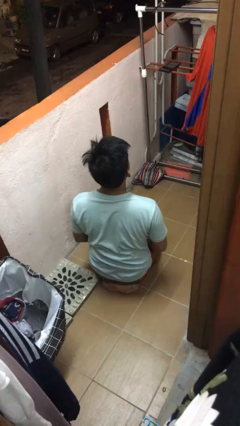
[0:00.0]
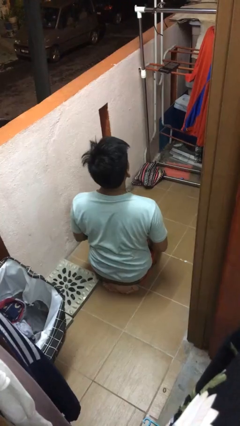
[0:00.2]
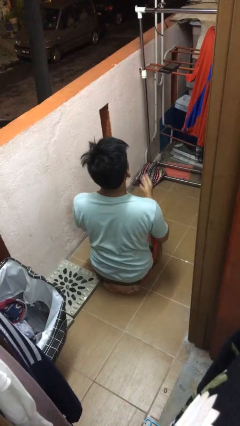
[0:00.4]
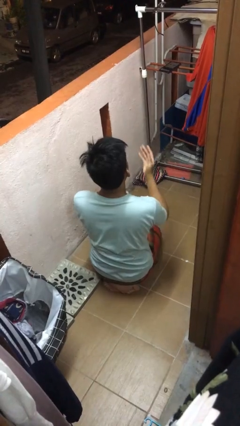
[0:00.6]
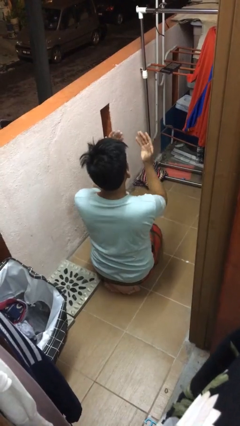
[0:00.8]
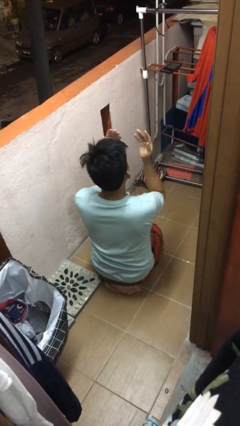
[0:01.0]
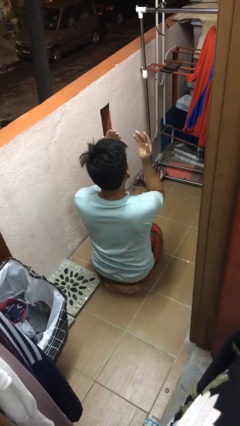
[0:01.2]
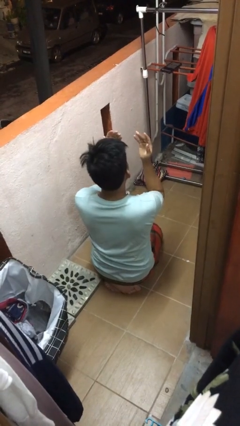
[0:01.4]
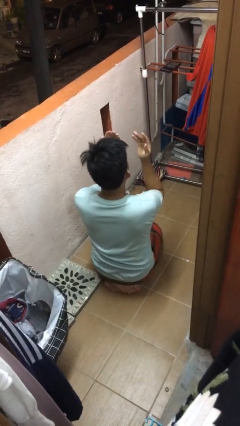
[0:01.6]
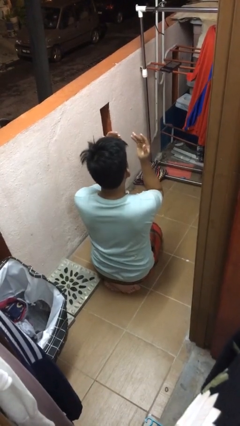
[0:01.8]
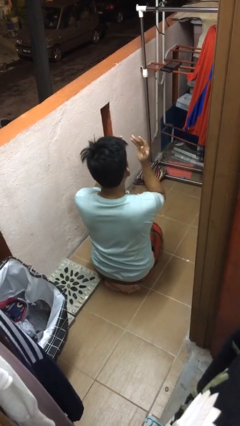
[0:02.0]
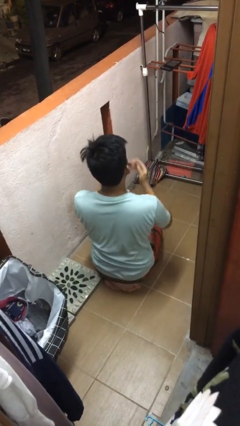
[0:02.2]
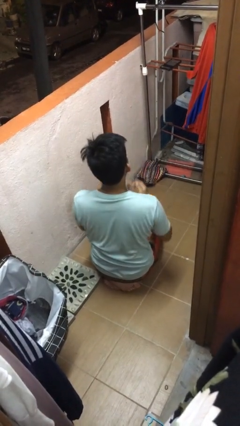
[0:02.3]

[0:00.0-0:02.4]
person prays

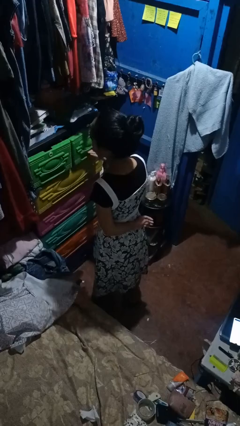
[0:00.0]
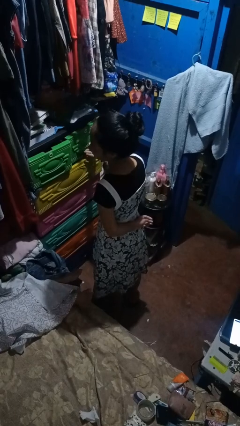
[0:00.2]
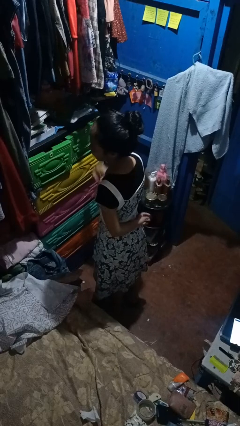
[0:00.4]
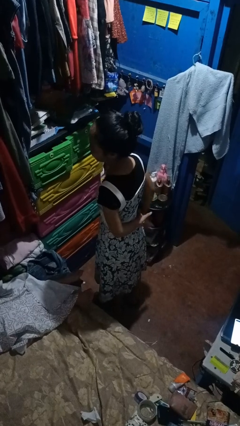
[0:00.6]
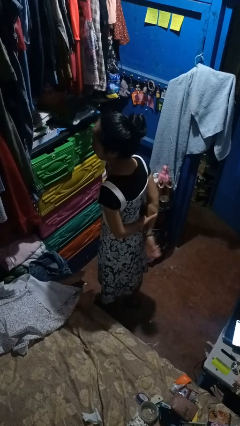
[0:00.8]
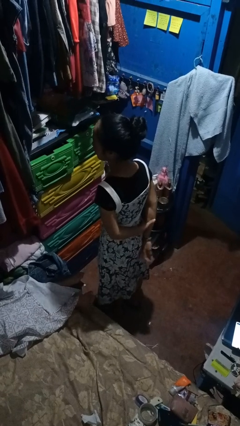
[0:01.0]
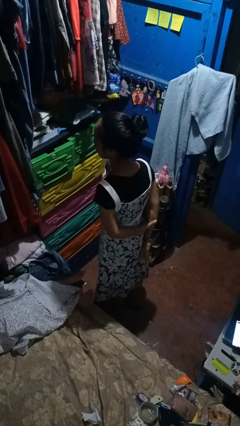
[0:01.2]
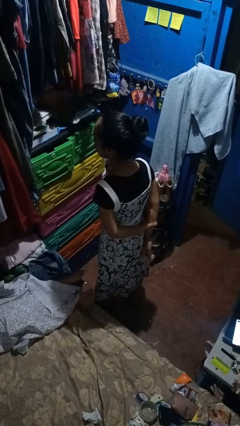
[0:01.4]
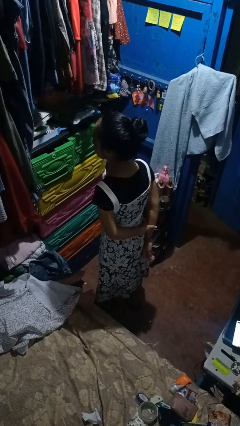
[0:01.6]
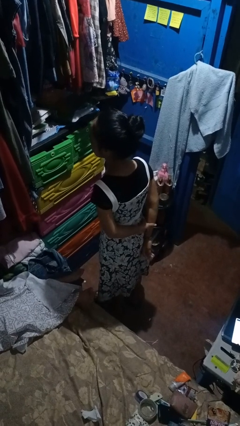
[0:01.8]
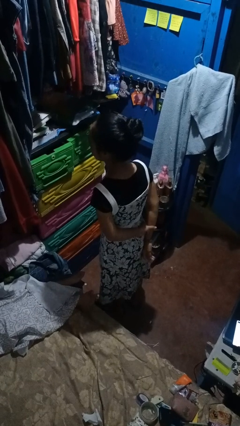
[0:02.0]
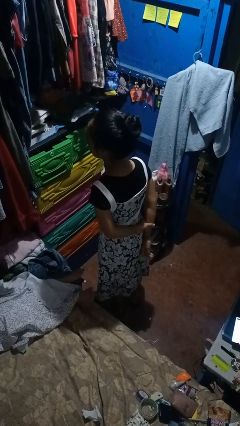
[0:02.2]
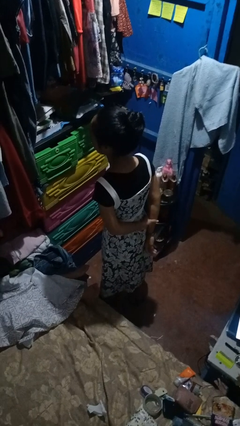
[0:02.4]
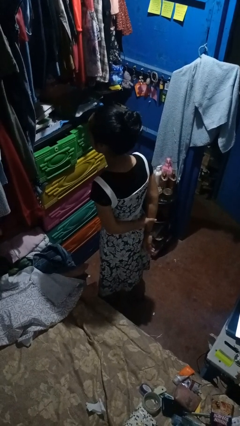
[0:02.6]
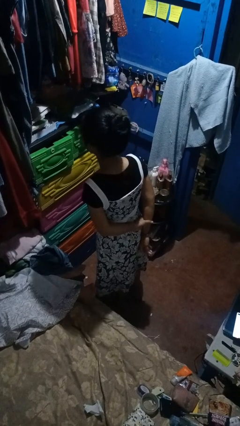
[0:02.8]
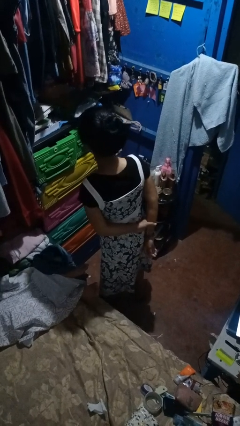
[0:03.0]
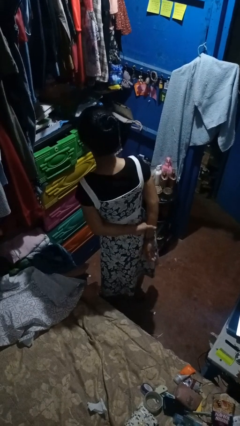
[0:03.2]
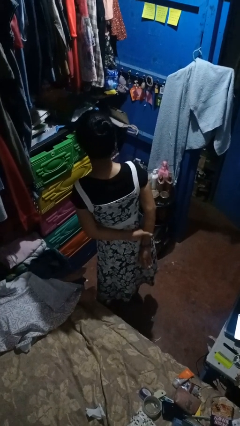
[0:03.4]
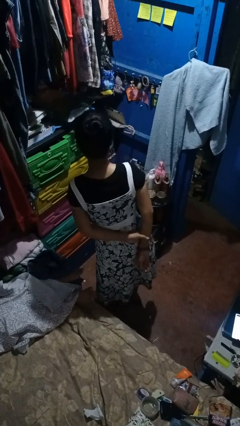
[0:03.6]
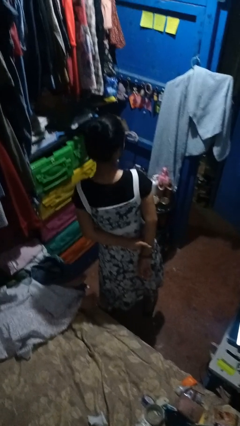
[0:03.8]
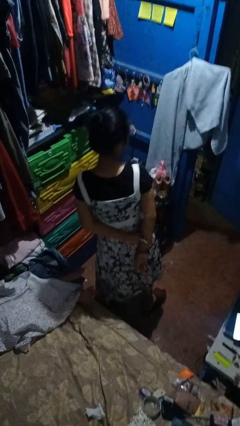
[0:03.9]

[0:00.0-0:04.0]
person closes dresser drawer

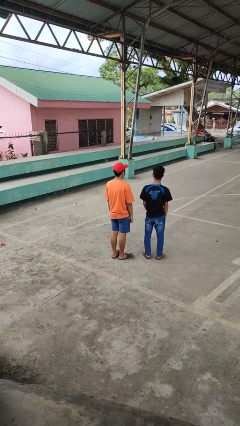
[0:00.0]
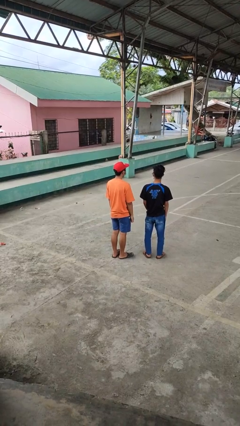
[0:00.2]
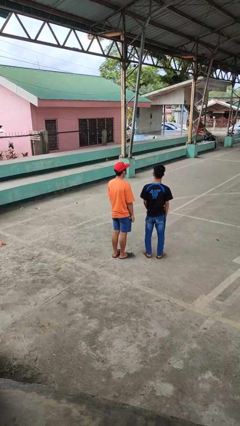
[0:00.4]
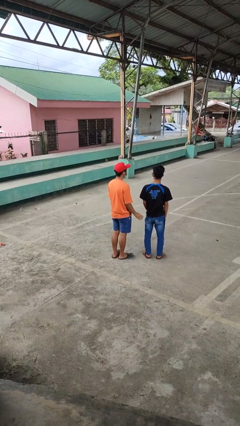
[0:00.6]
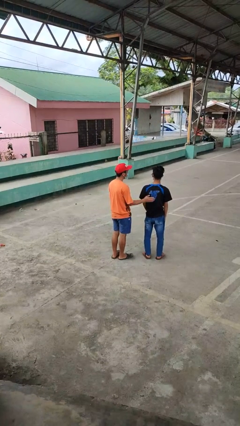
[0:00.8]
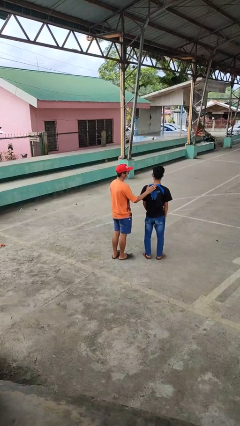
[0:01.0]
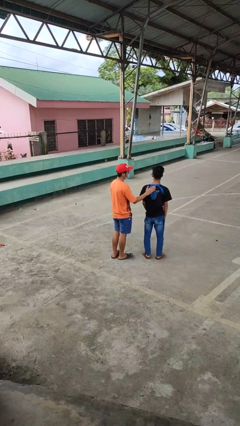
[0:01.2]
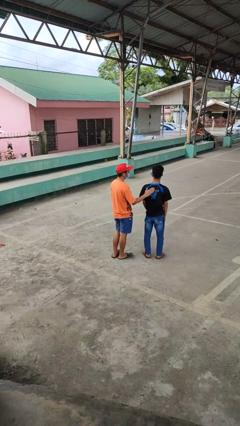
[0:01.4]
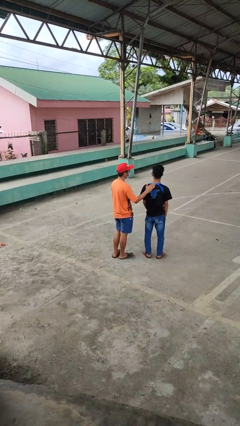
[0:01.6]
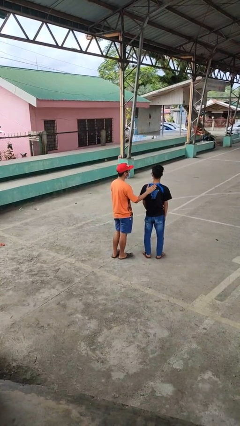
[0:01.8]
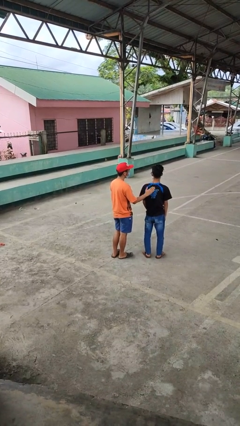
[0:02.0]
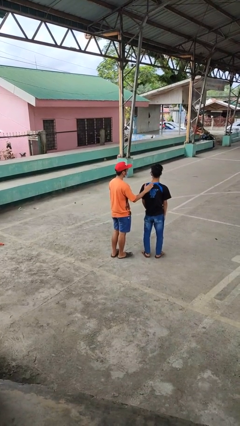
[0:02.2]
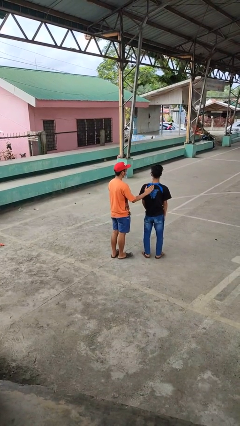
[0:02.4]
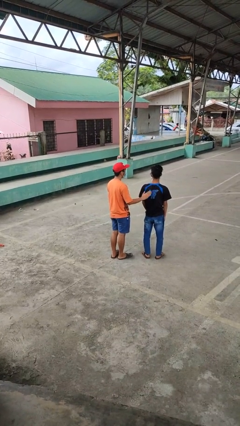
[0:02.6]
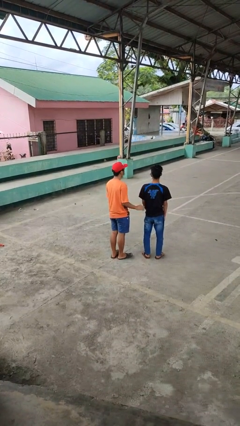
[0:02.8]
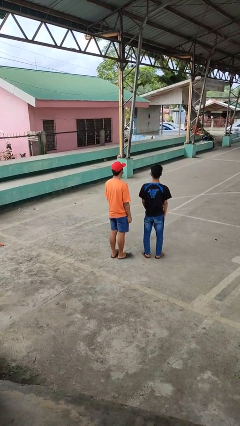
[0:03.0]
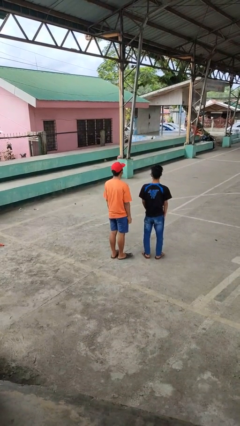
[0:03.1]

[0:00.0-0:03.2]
person touches back of person

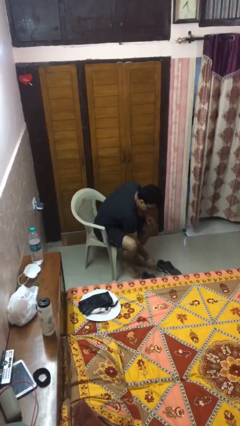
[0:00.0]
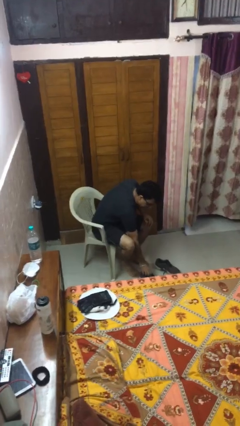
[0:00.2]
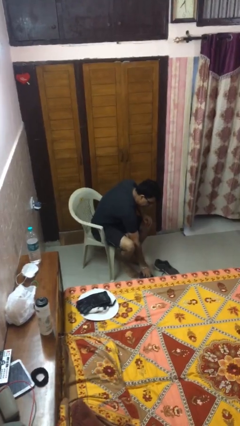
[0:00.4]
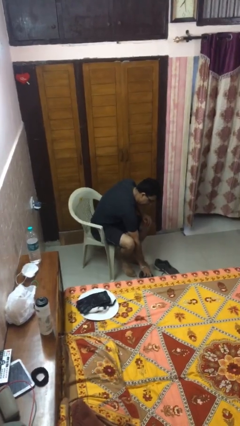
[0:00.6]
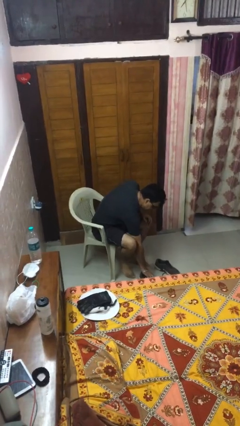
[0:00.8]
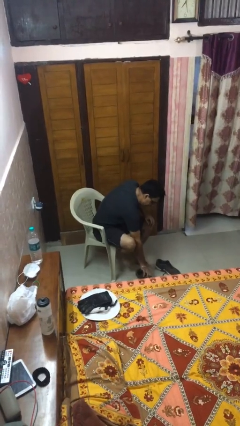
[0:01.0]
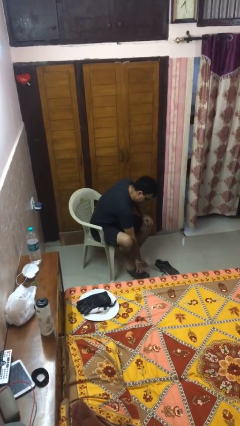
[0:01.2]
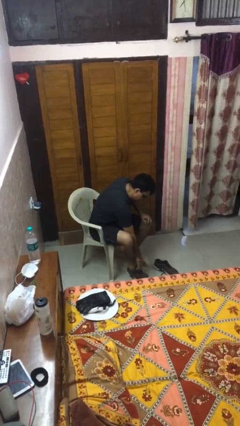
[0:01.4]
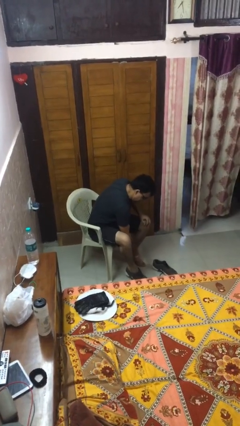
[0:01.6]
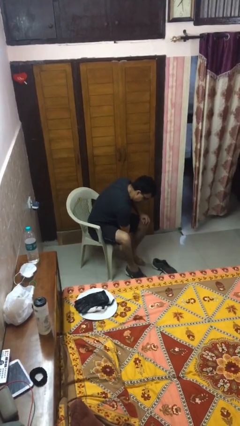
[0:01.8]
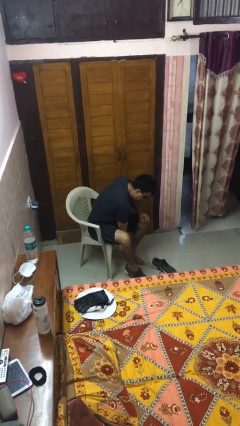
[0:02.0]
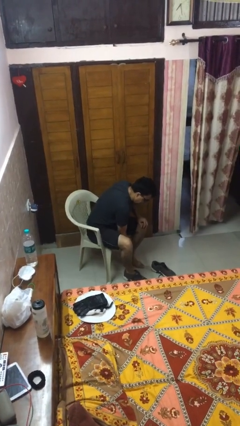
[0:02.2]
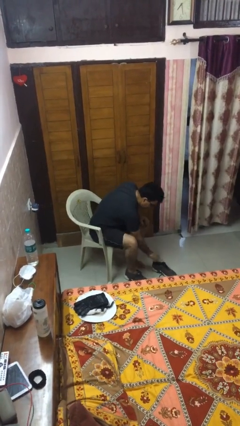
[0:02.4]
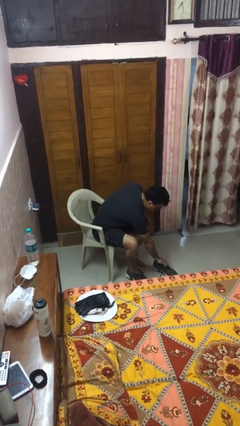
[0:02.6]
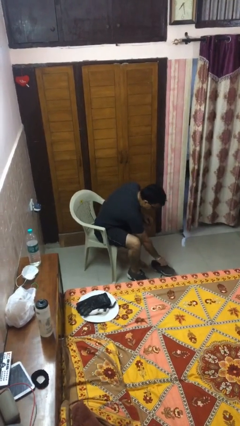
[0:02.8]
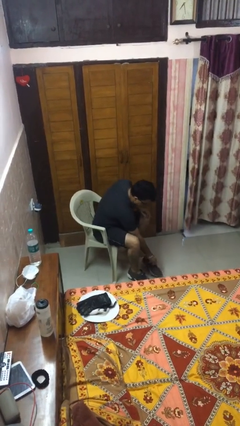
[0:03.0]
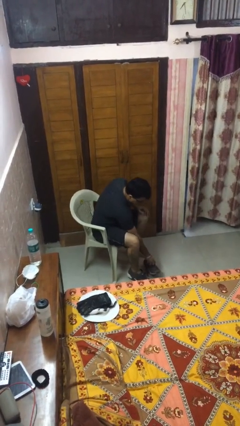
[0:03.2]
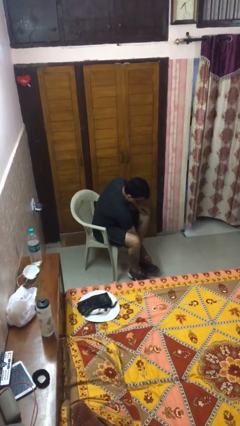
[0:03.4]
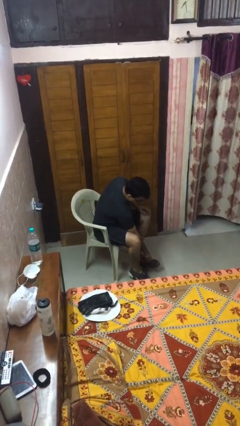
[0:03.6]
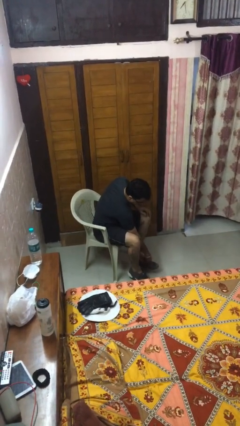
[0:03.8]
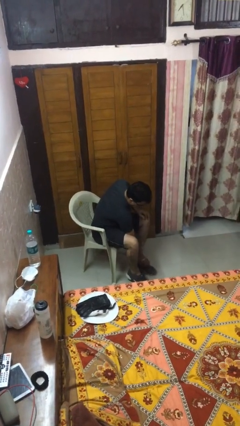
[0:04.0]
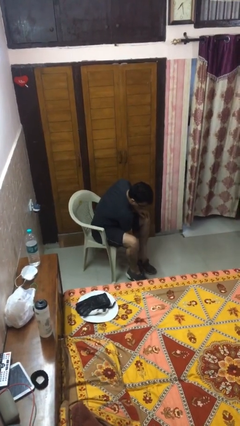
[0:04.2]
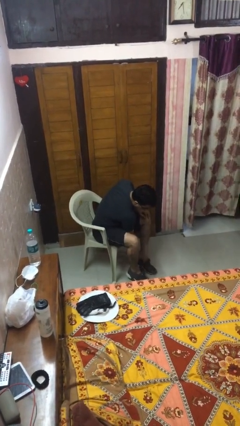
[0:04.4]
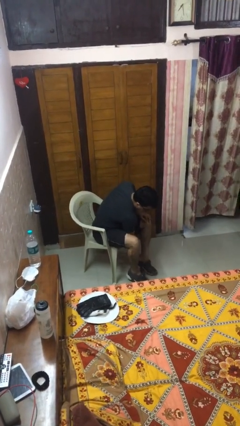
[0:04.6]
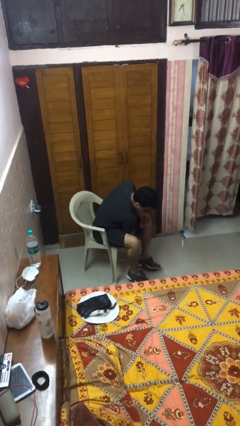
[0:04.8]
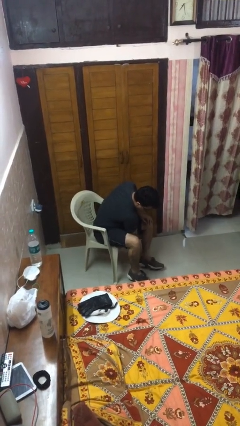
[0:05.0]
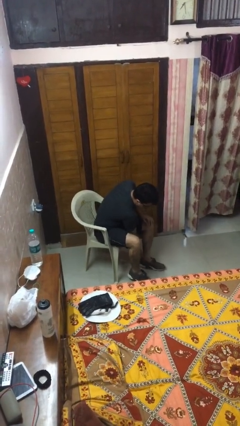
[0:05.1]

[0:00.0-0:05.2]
person puts on shoes

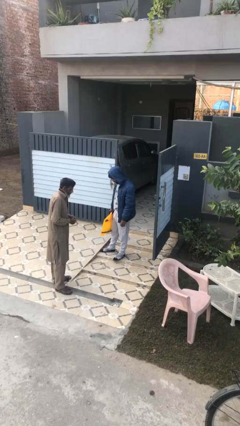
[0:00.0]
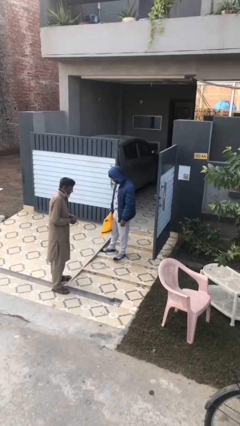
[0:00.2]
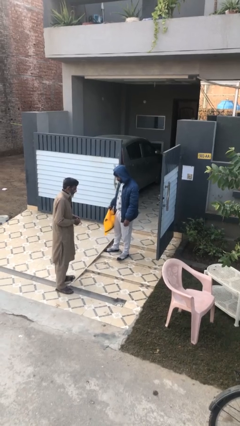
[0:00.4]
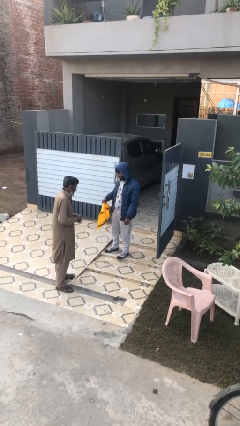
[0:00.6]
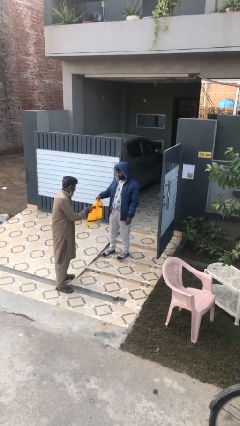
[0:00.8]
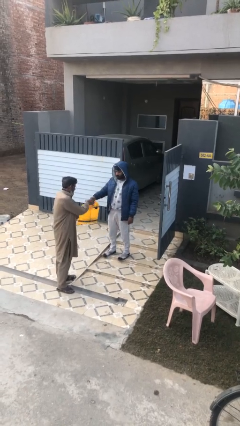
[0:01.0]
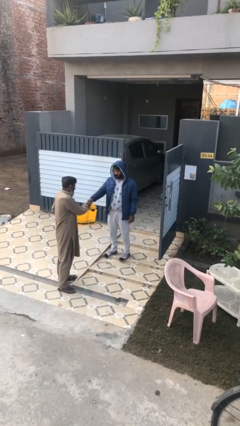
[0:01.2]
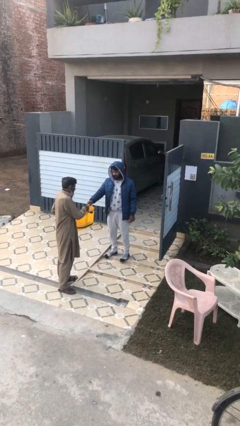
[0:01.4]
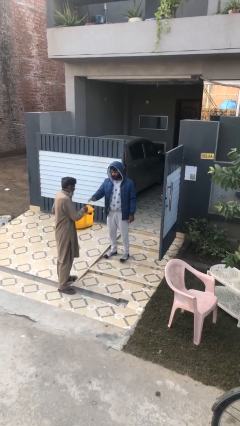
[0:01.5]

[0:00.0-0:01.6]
person transfers object to person

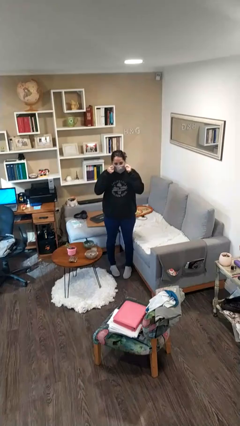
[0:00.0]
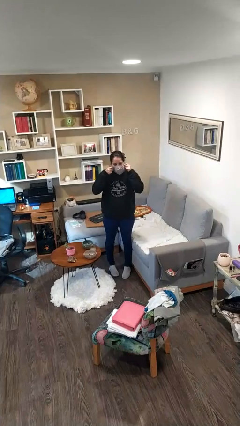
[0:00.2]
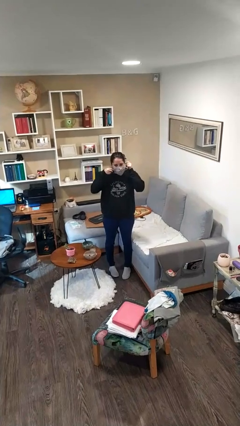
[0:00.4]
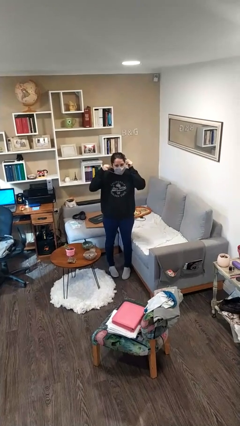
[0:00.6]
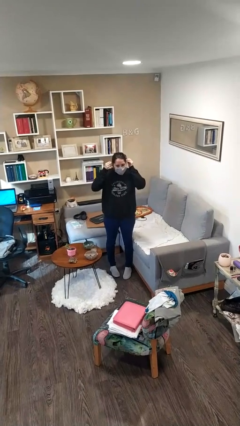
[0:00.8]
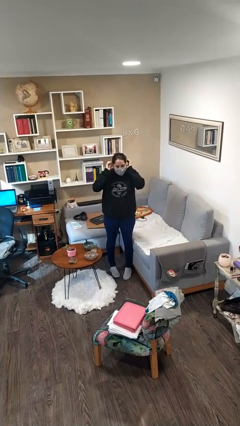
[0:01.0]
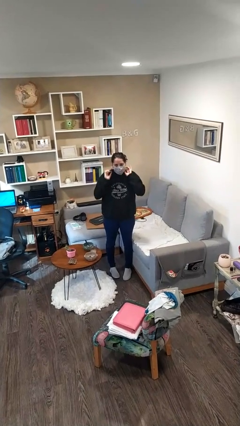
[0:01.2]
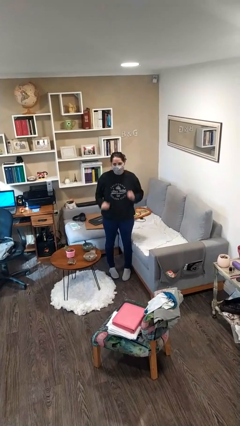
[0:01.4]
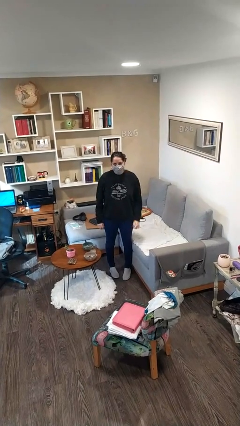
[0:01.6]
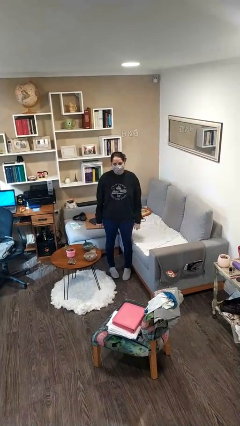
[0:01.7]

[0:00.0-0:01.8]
person puts on facemask
